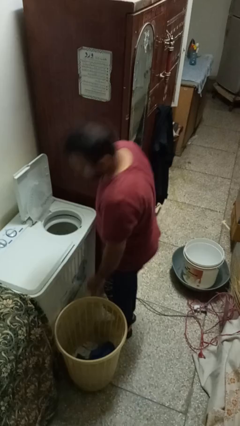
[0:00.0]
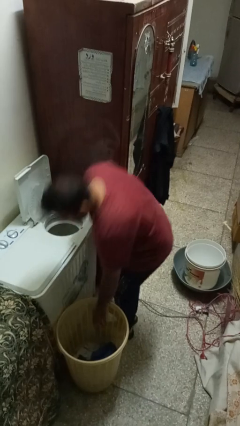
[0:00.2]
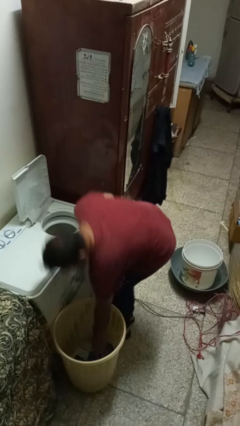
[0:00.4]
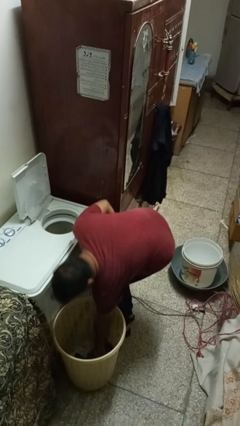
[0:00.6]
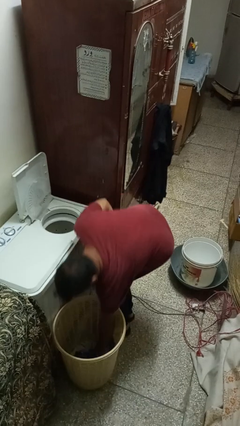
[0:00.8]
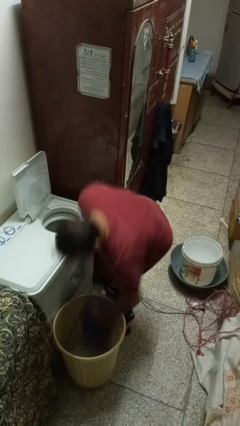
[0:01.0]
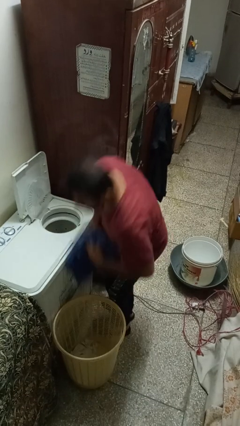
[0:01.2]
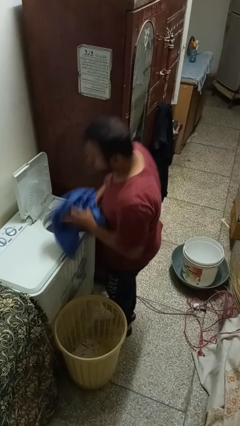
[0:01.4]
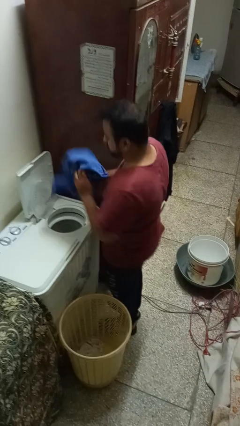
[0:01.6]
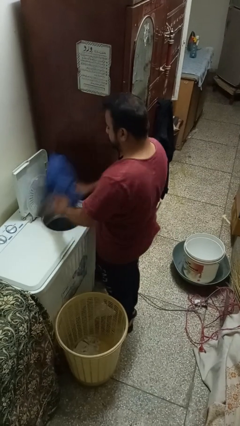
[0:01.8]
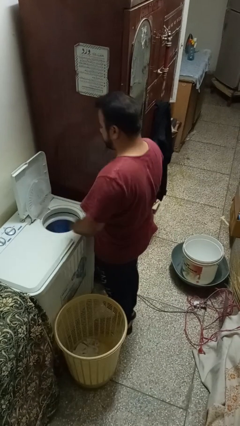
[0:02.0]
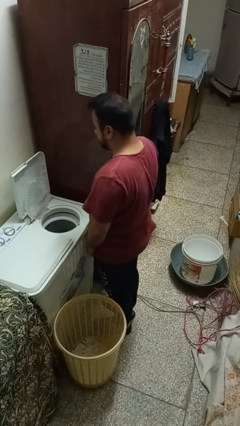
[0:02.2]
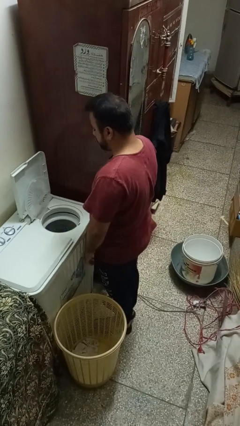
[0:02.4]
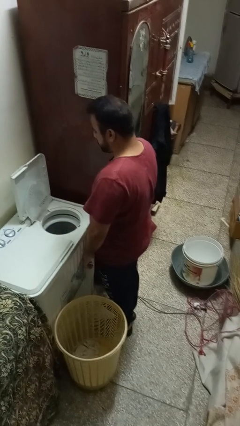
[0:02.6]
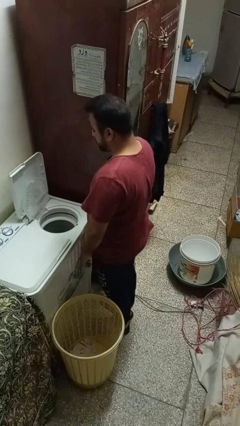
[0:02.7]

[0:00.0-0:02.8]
person loads dryer

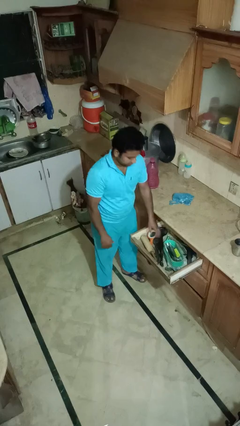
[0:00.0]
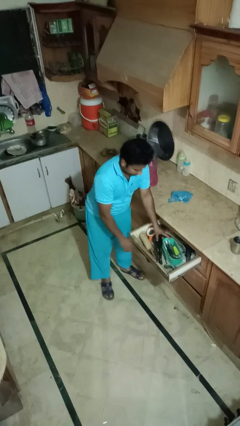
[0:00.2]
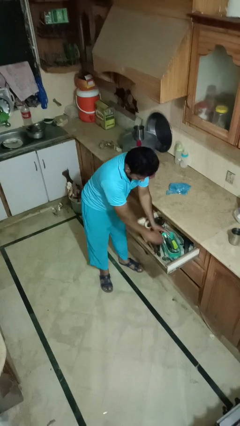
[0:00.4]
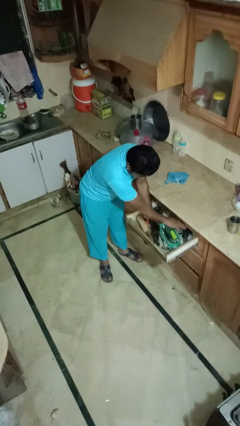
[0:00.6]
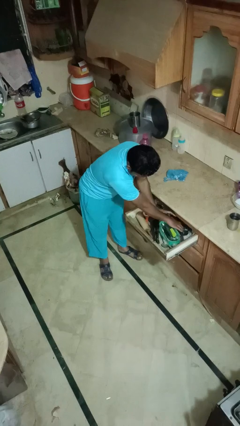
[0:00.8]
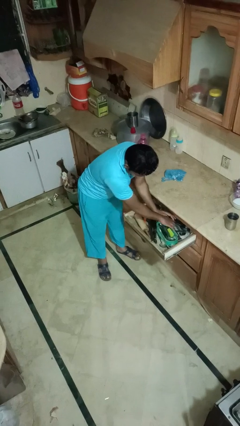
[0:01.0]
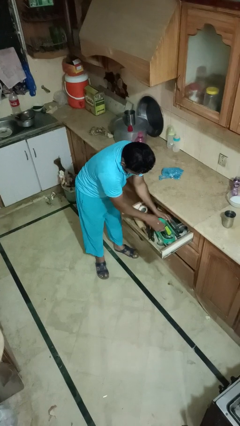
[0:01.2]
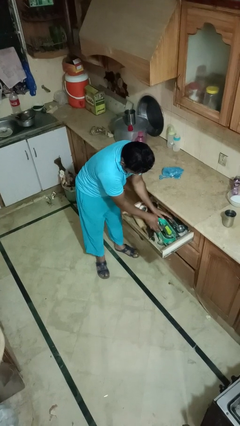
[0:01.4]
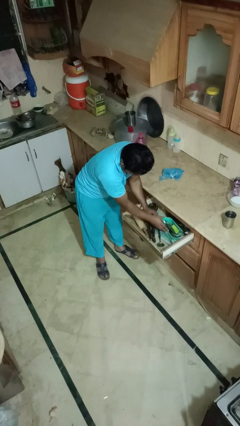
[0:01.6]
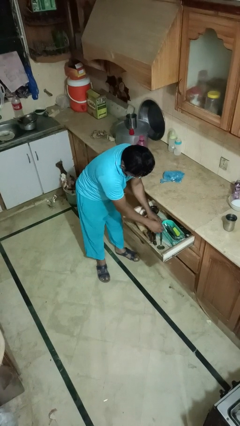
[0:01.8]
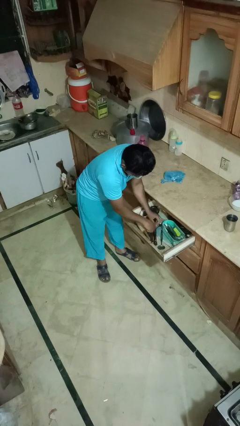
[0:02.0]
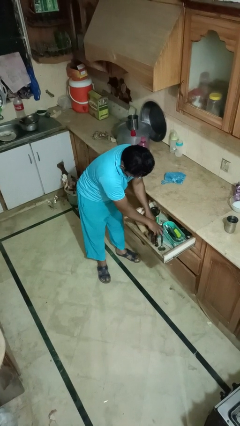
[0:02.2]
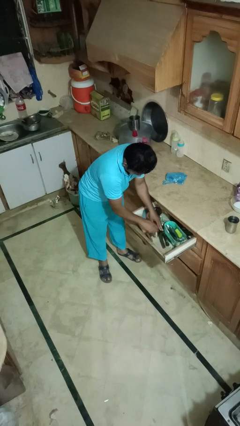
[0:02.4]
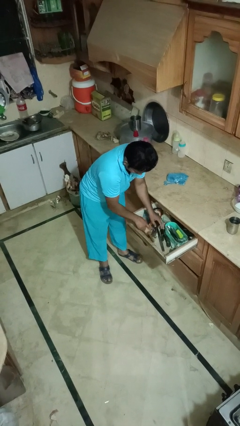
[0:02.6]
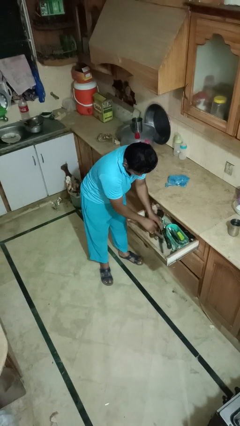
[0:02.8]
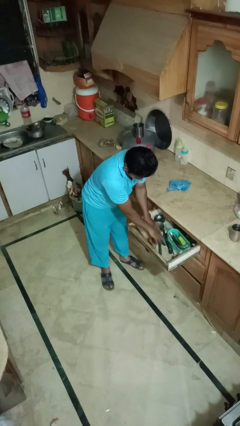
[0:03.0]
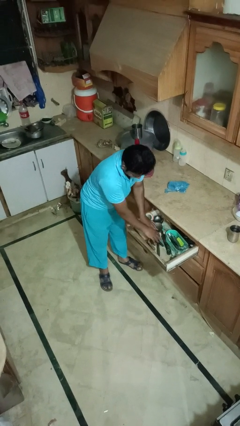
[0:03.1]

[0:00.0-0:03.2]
person searches in kitchen drawer

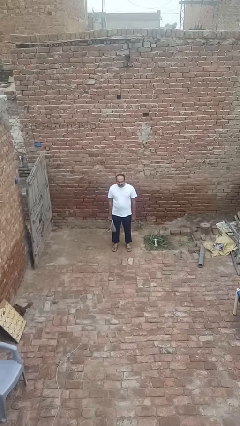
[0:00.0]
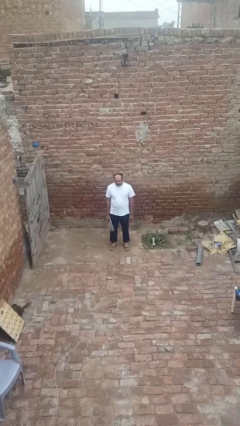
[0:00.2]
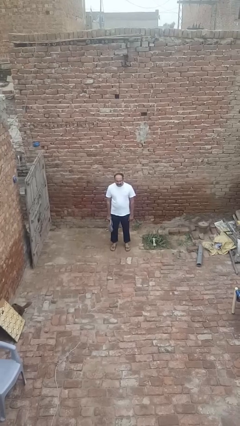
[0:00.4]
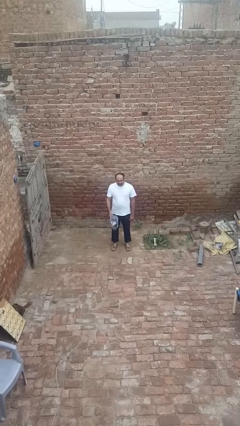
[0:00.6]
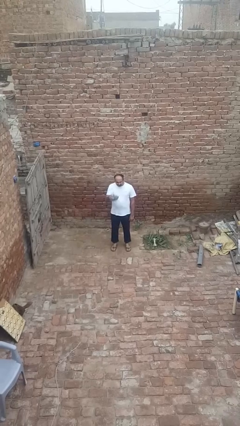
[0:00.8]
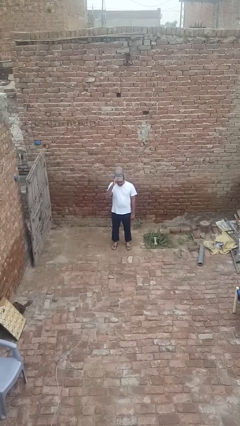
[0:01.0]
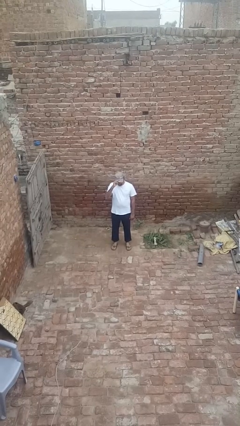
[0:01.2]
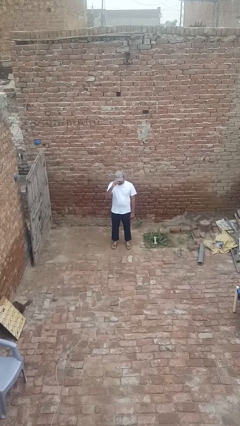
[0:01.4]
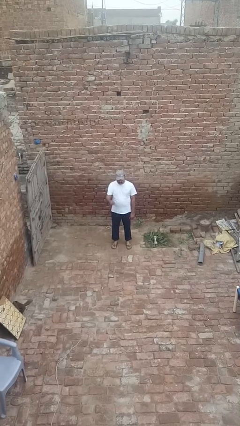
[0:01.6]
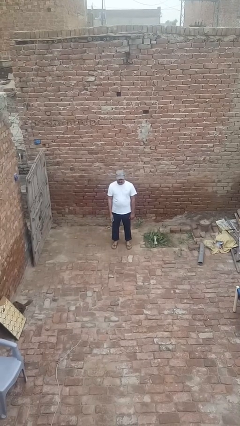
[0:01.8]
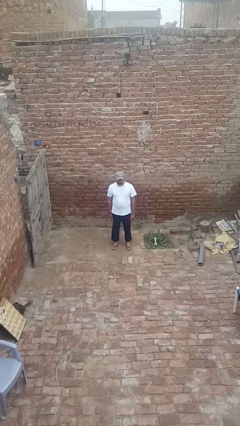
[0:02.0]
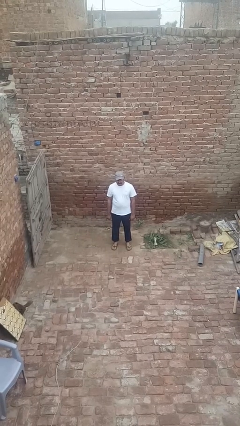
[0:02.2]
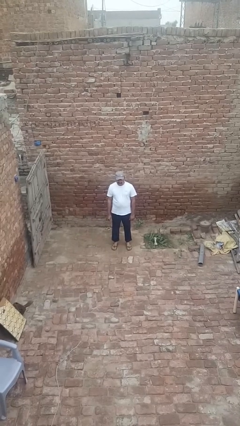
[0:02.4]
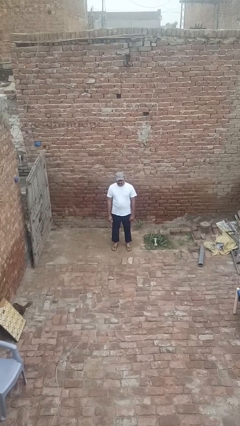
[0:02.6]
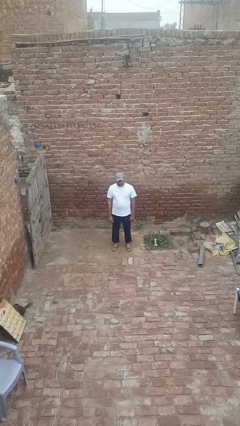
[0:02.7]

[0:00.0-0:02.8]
person puts on hat

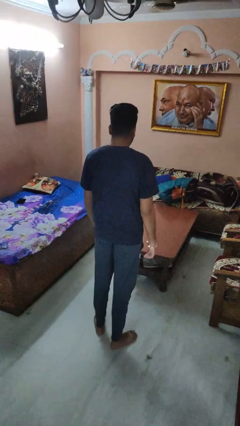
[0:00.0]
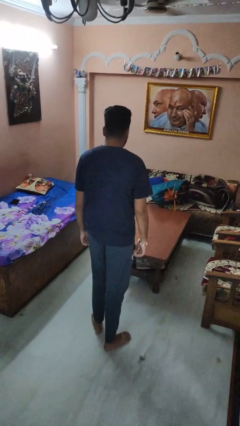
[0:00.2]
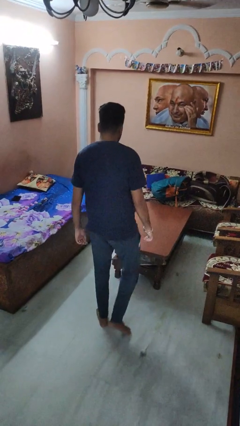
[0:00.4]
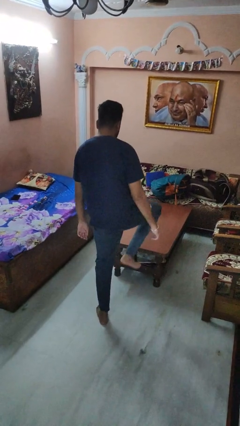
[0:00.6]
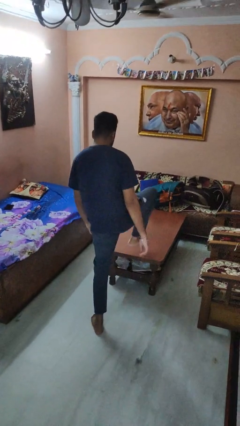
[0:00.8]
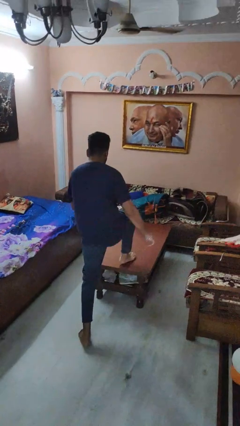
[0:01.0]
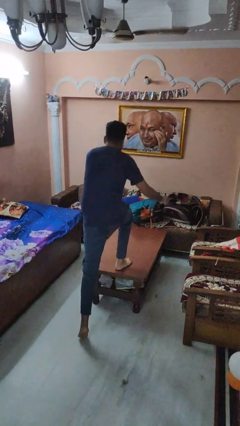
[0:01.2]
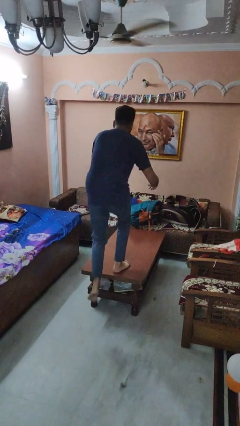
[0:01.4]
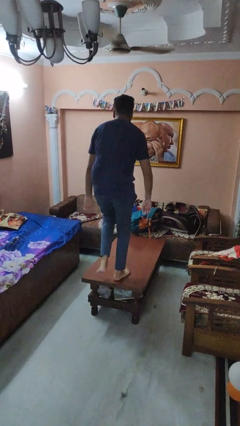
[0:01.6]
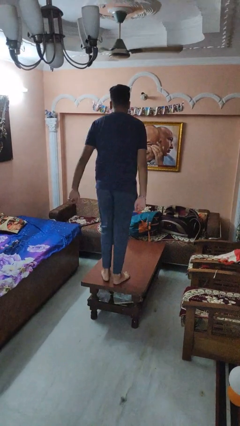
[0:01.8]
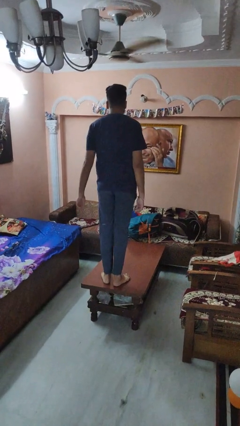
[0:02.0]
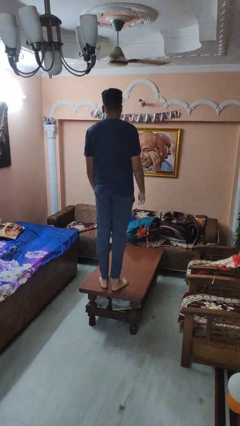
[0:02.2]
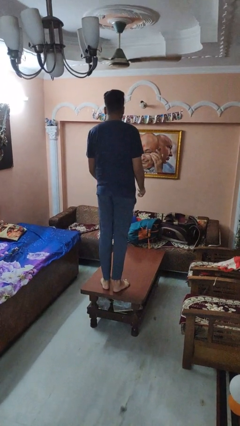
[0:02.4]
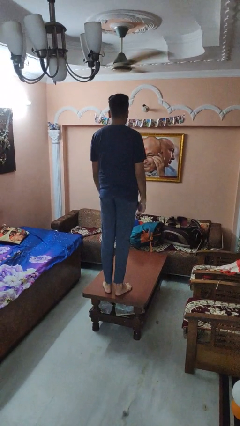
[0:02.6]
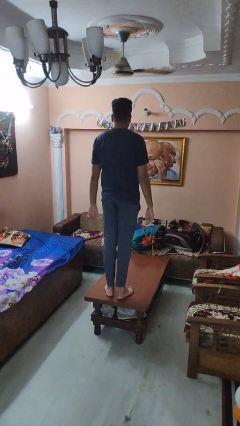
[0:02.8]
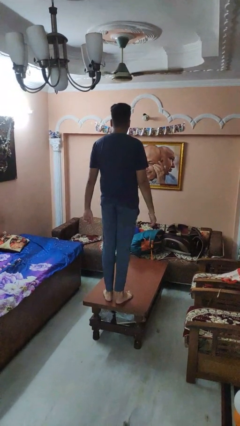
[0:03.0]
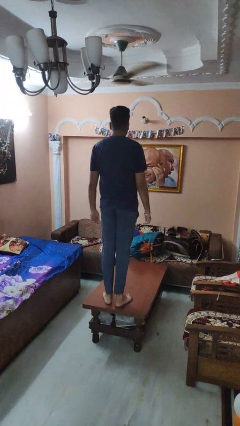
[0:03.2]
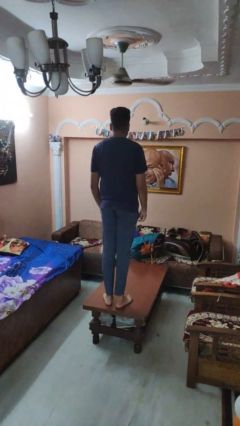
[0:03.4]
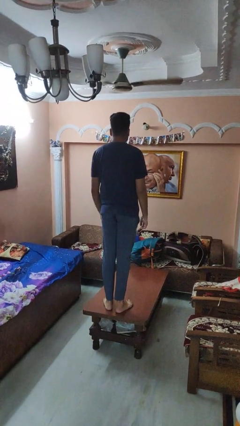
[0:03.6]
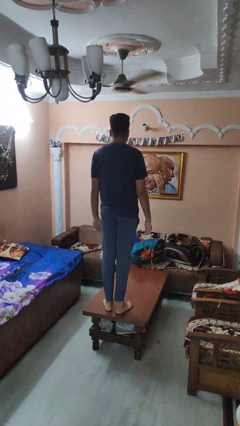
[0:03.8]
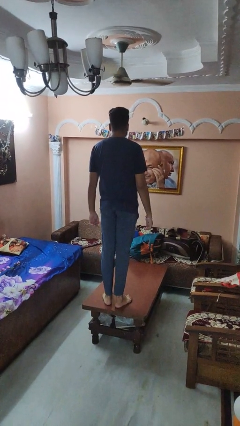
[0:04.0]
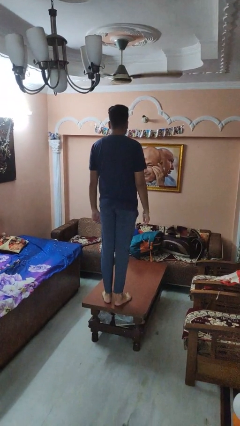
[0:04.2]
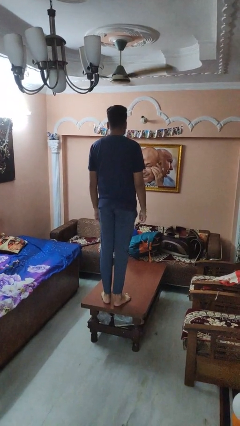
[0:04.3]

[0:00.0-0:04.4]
person climbs on table

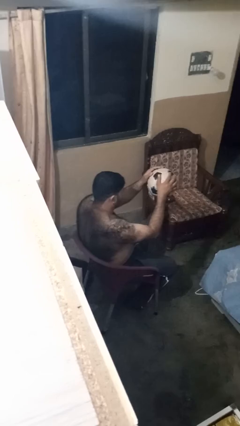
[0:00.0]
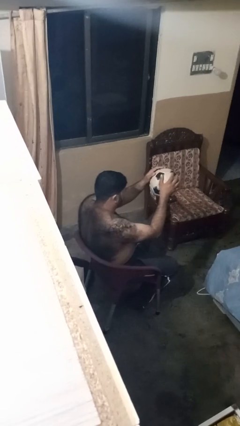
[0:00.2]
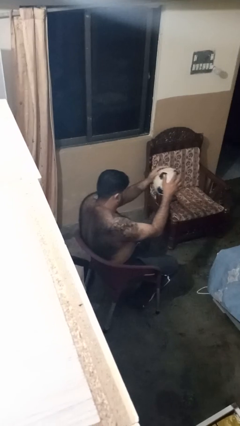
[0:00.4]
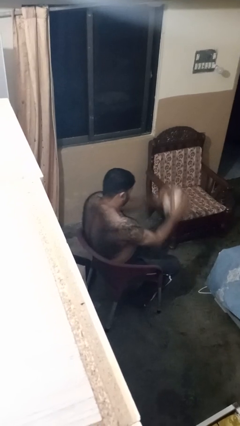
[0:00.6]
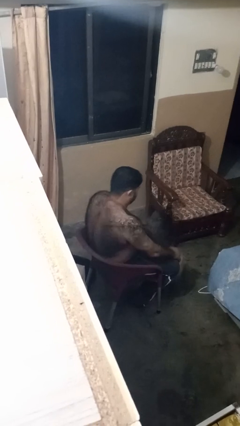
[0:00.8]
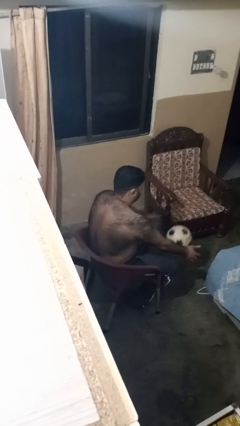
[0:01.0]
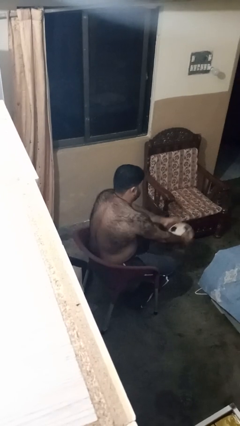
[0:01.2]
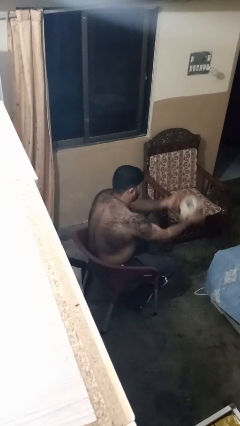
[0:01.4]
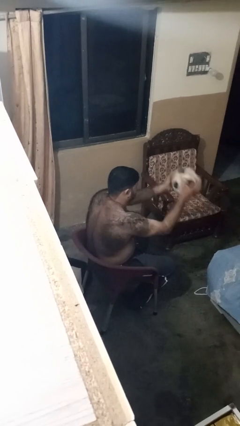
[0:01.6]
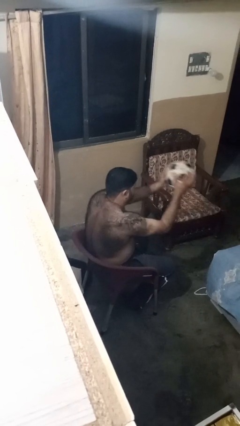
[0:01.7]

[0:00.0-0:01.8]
person bounces ball on floor

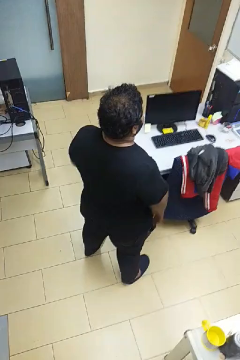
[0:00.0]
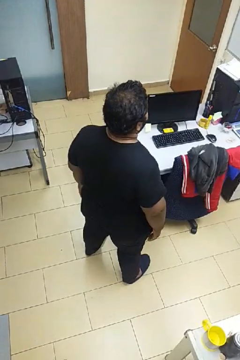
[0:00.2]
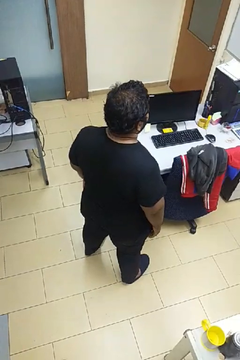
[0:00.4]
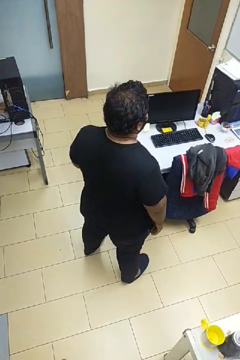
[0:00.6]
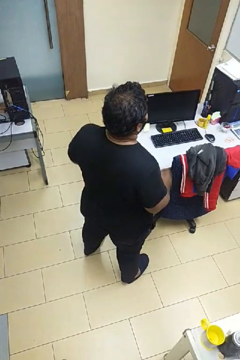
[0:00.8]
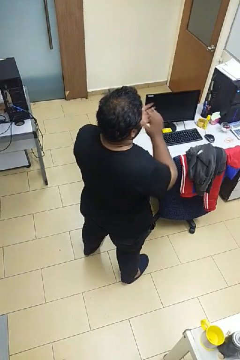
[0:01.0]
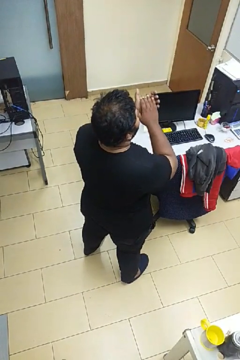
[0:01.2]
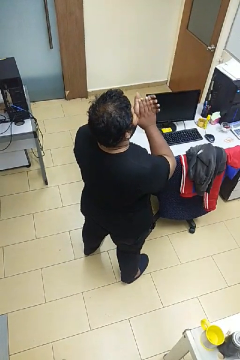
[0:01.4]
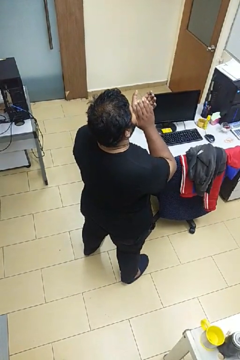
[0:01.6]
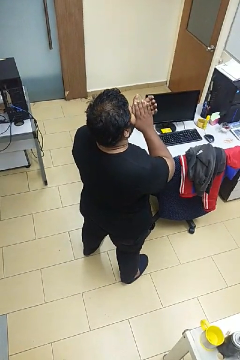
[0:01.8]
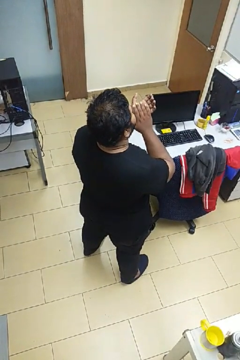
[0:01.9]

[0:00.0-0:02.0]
person claps hands

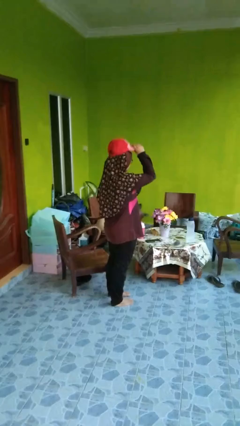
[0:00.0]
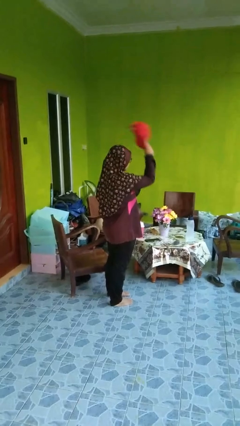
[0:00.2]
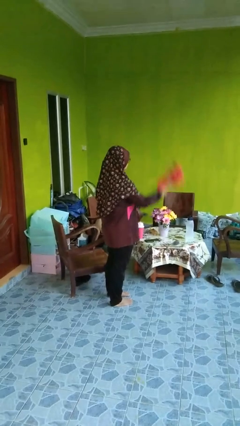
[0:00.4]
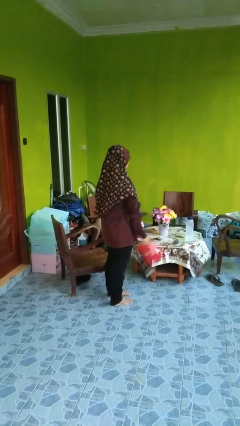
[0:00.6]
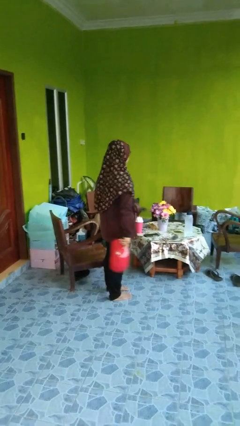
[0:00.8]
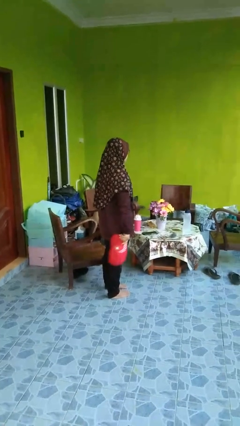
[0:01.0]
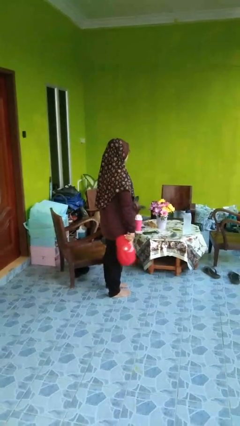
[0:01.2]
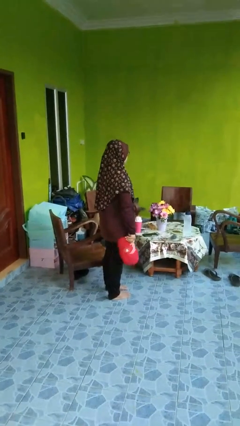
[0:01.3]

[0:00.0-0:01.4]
person takes off hat
